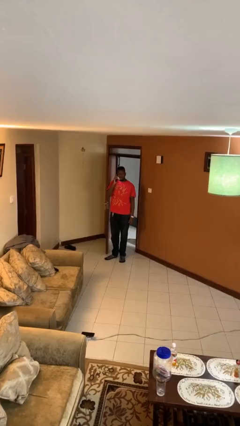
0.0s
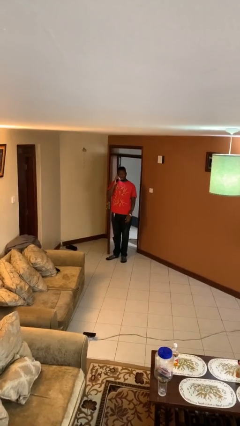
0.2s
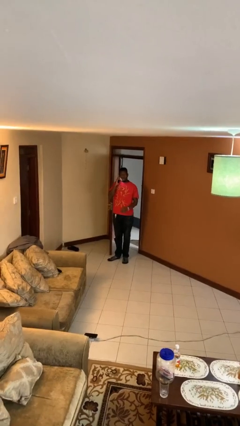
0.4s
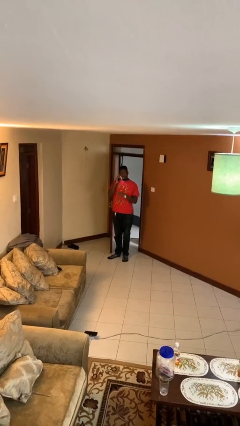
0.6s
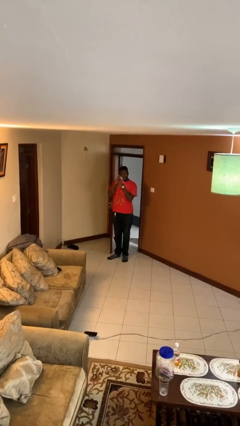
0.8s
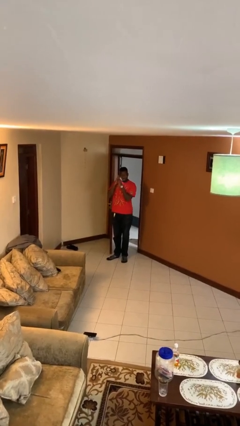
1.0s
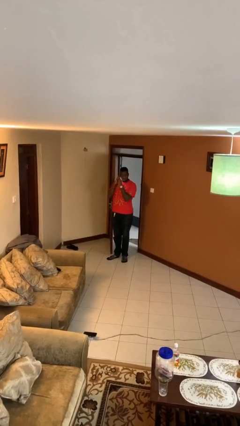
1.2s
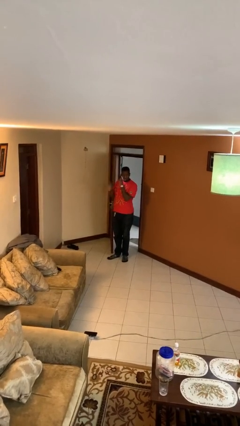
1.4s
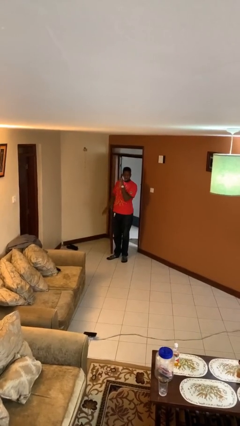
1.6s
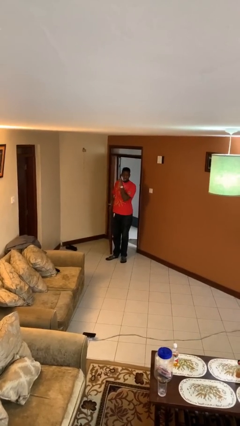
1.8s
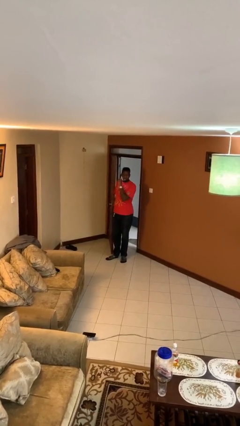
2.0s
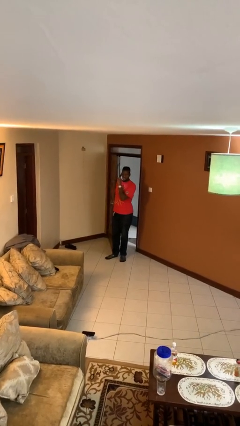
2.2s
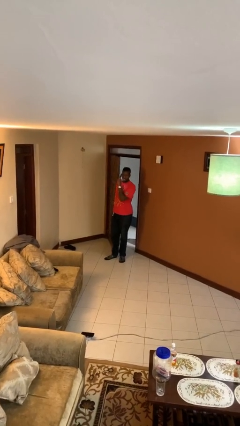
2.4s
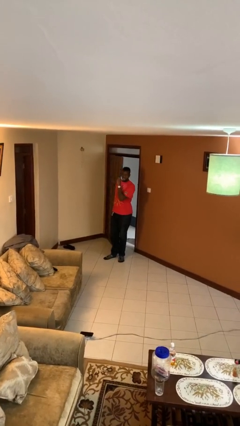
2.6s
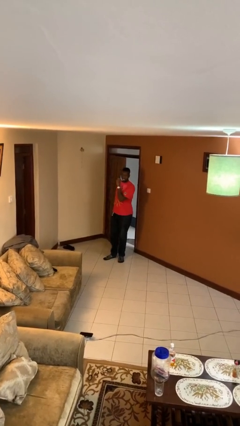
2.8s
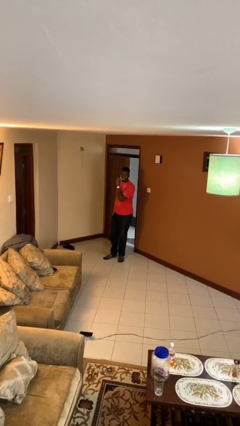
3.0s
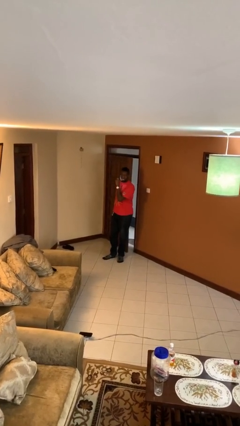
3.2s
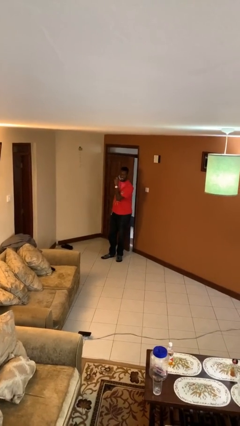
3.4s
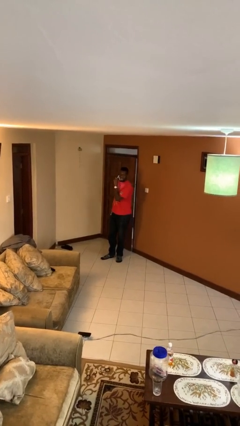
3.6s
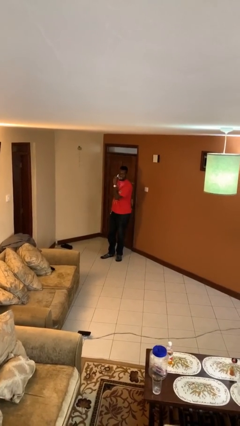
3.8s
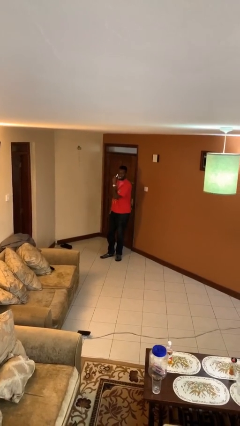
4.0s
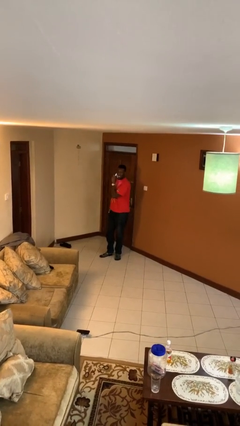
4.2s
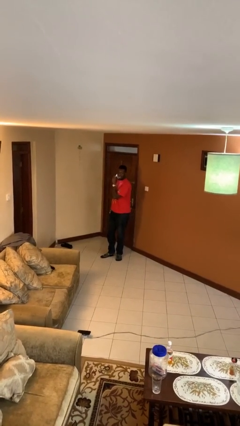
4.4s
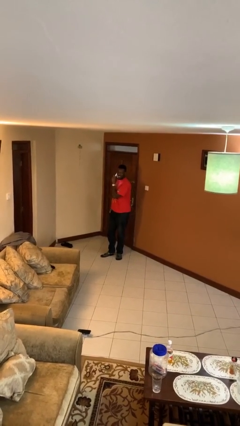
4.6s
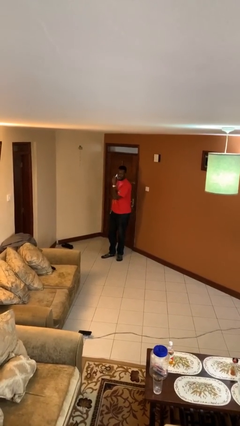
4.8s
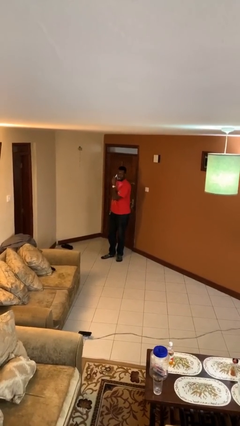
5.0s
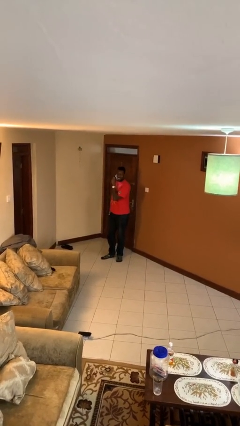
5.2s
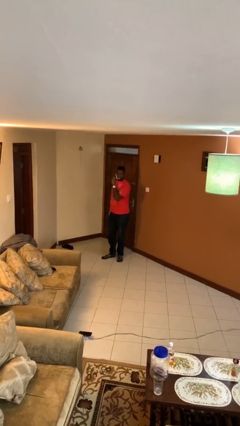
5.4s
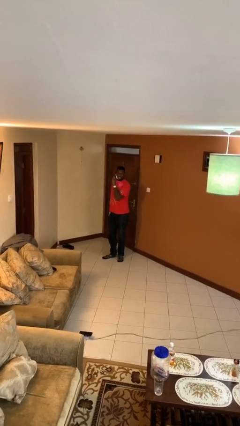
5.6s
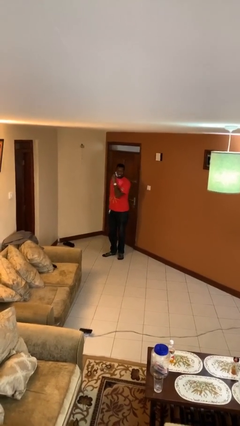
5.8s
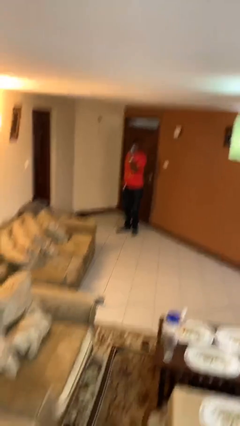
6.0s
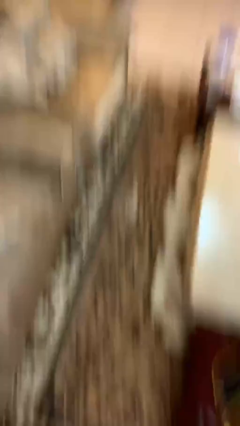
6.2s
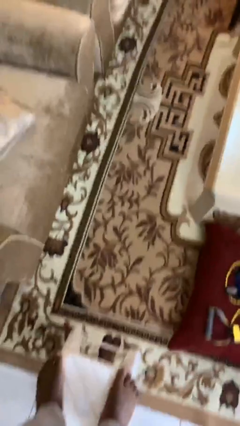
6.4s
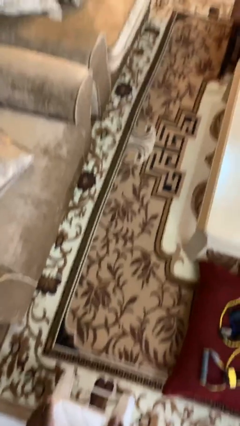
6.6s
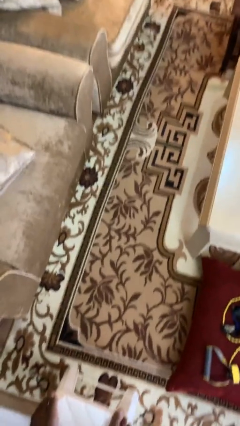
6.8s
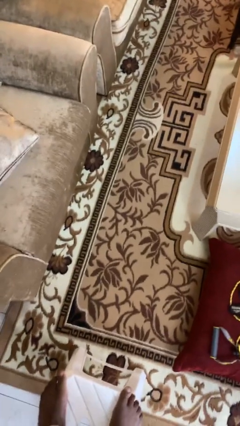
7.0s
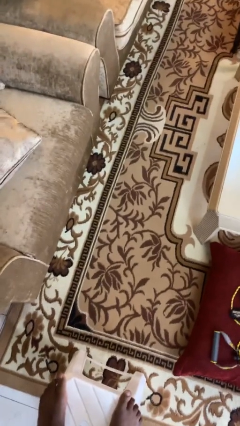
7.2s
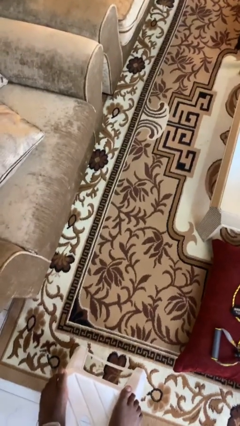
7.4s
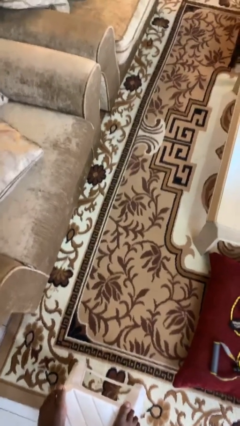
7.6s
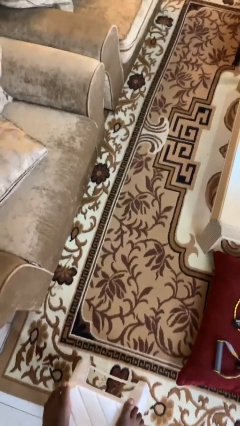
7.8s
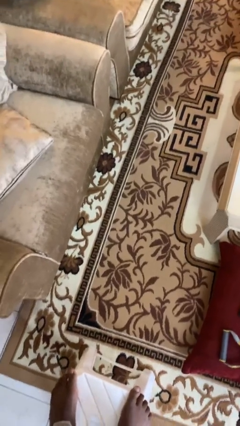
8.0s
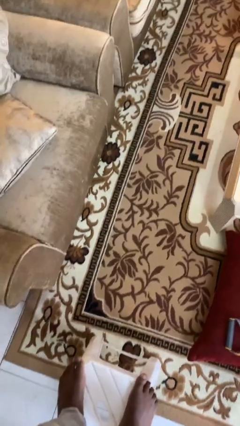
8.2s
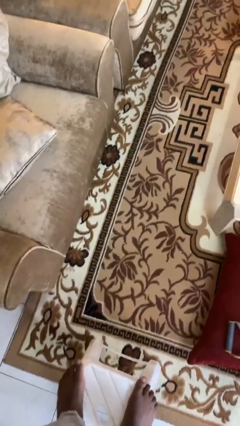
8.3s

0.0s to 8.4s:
person closes facility door

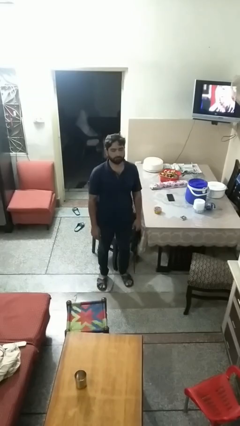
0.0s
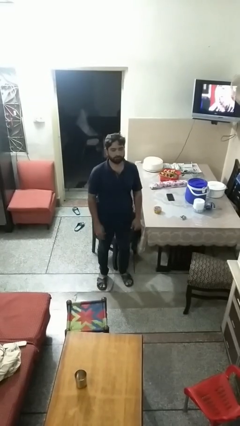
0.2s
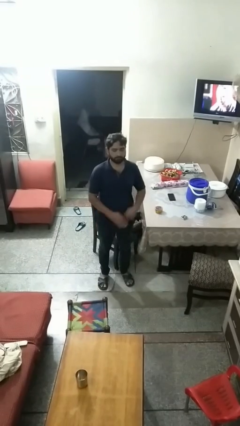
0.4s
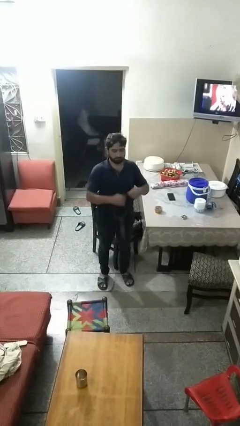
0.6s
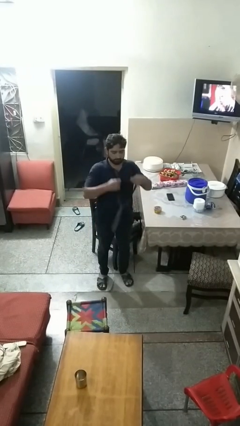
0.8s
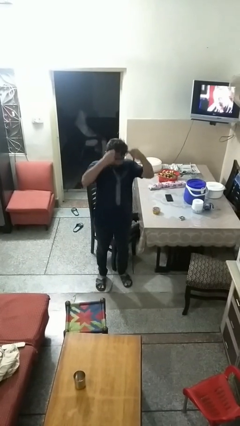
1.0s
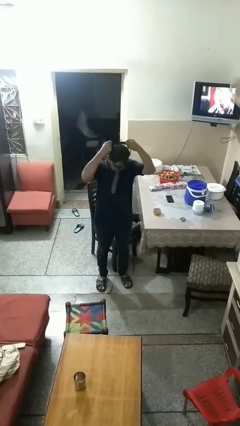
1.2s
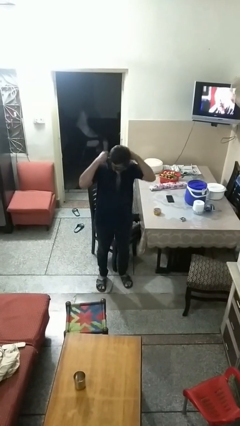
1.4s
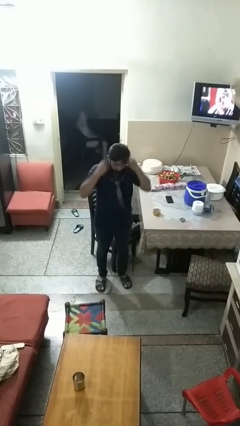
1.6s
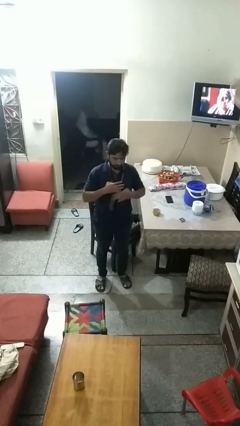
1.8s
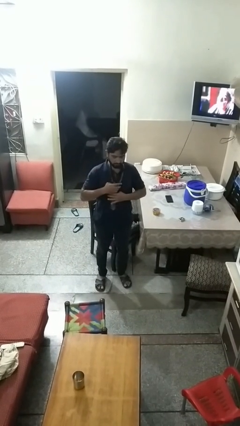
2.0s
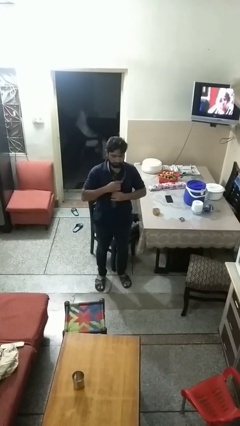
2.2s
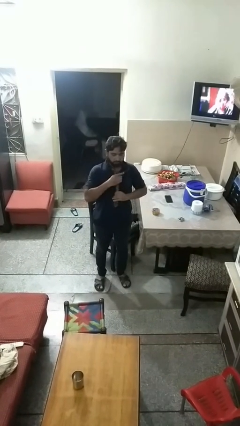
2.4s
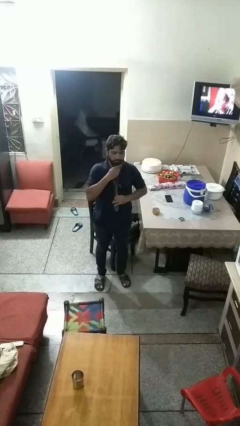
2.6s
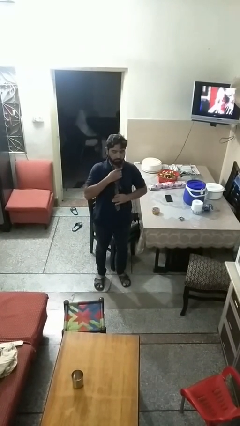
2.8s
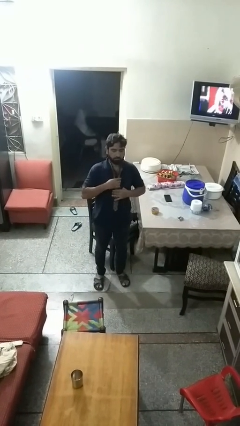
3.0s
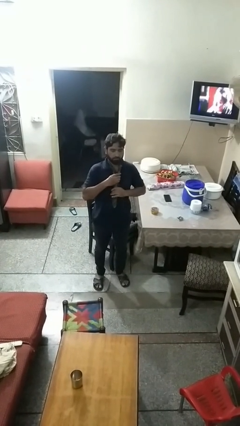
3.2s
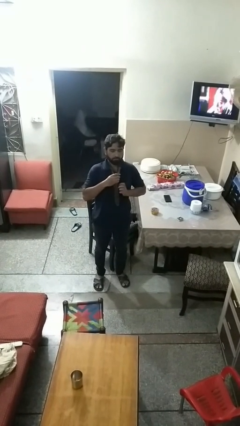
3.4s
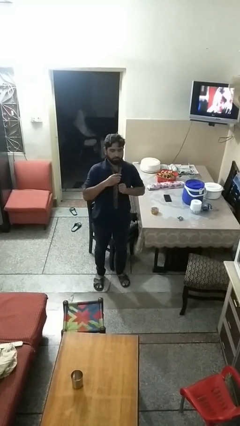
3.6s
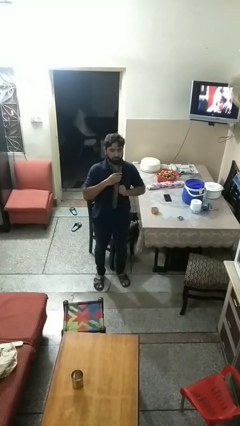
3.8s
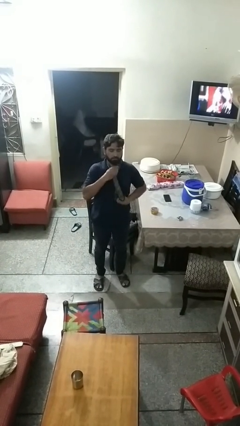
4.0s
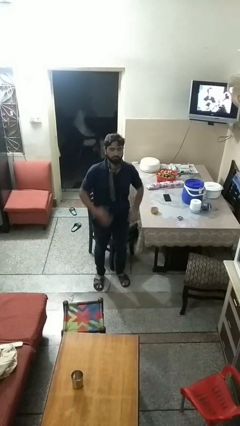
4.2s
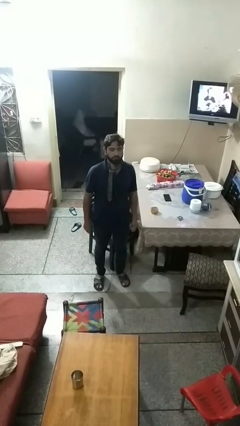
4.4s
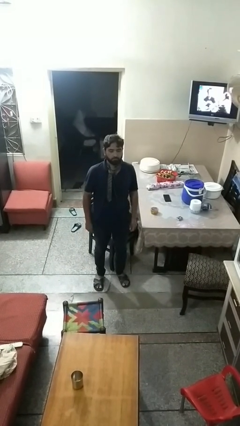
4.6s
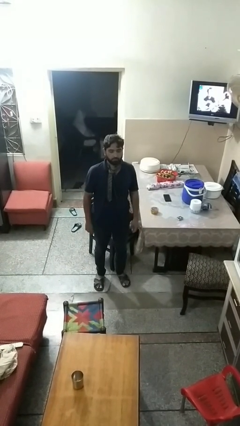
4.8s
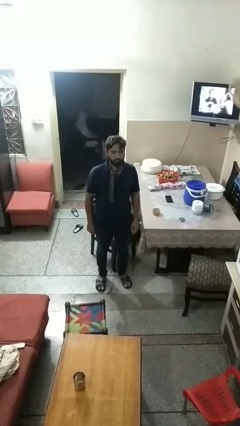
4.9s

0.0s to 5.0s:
person puts on necktie

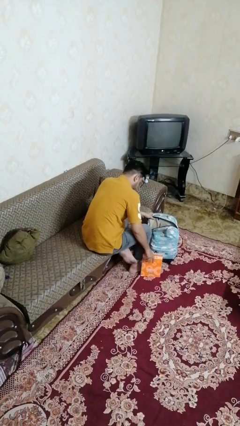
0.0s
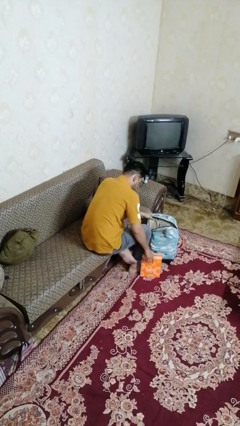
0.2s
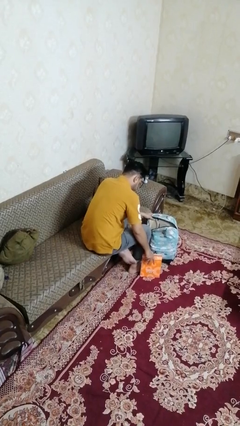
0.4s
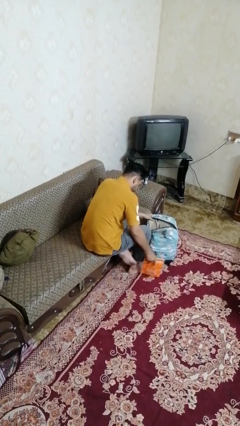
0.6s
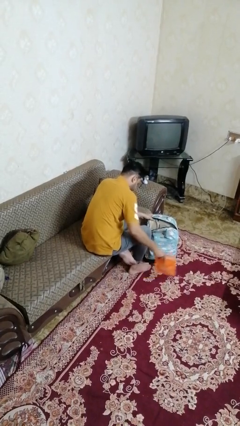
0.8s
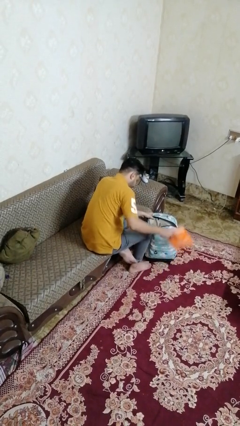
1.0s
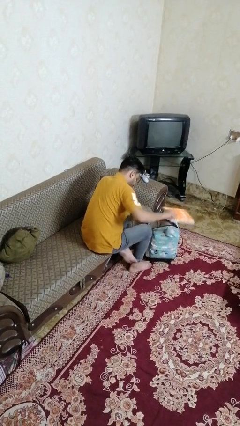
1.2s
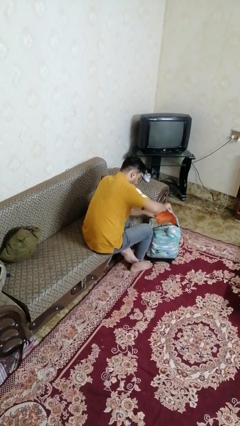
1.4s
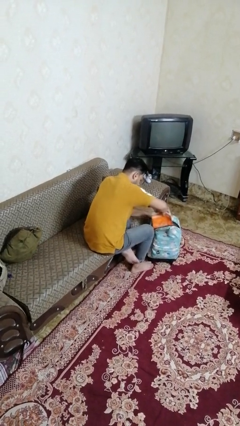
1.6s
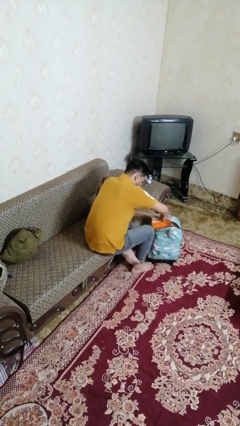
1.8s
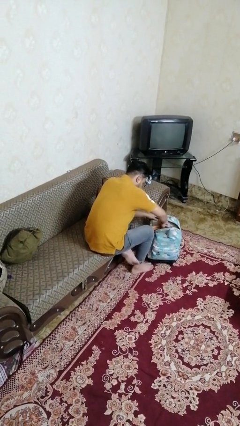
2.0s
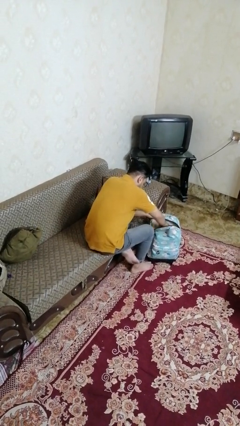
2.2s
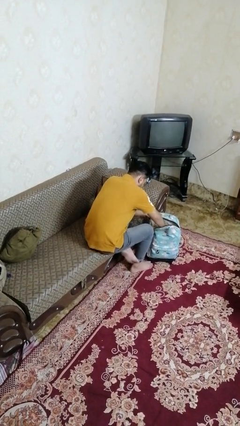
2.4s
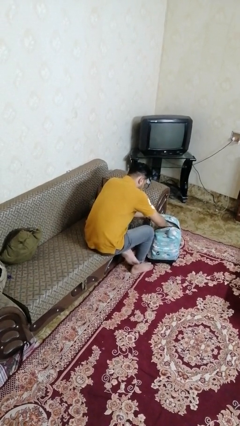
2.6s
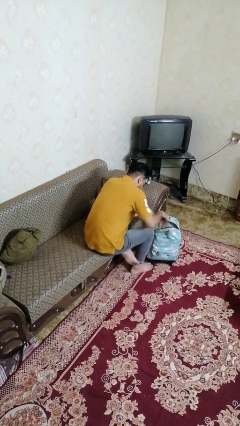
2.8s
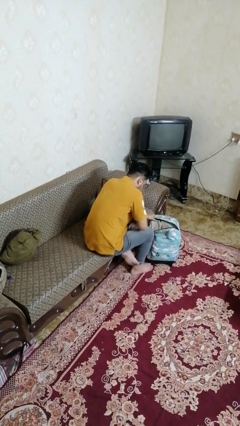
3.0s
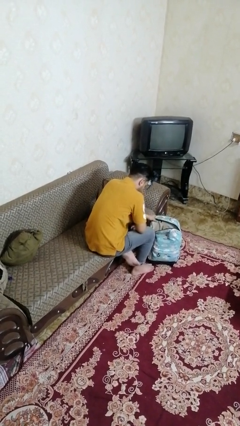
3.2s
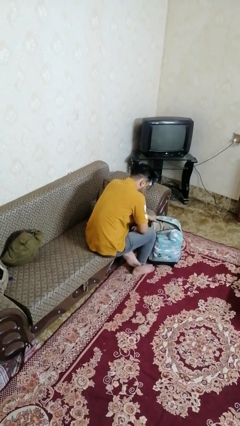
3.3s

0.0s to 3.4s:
person puts object into bag

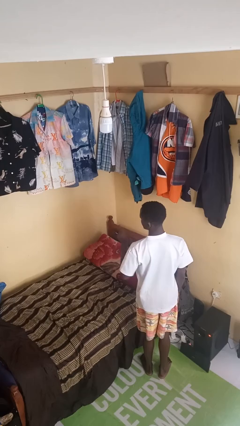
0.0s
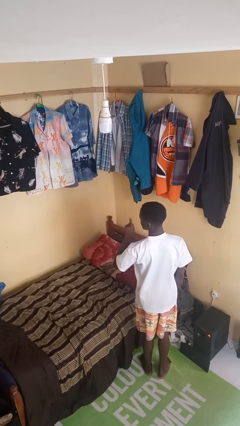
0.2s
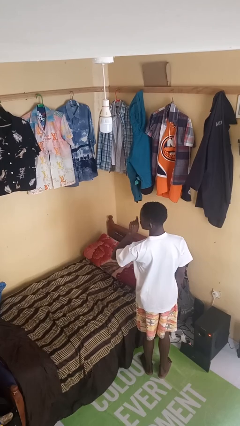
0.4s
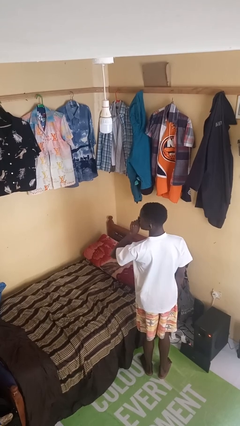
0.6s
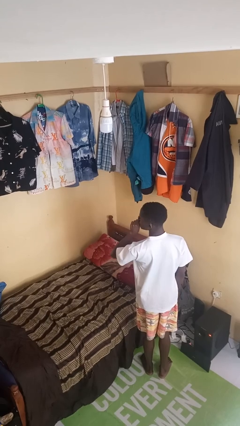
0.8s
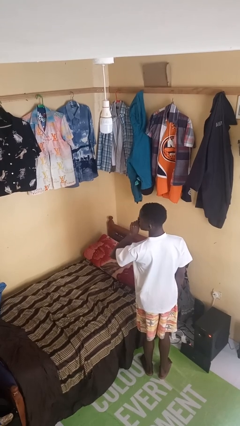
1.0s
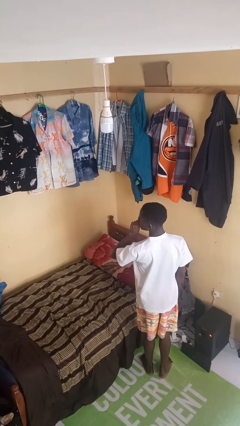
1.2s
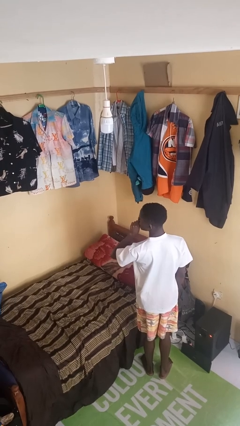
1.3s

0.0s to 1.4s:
person gestures be quiet
